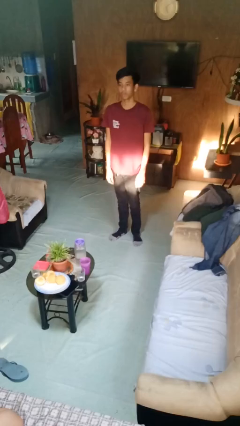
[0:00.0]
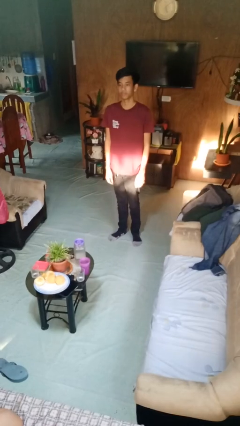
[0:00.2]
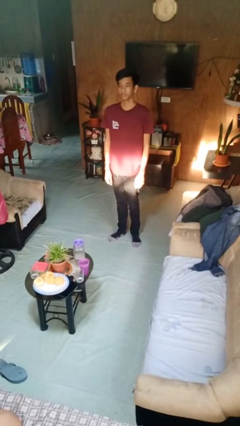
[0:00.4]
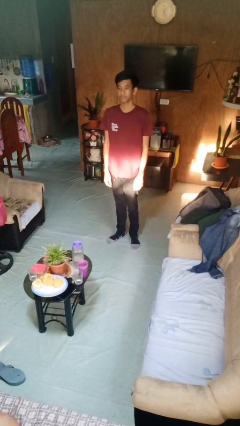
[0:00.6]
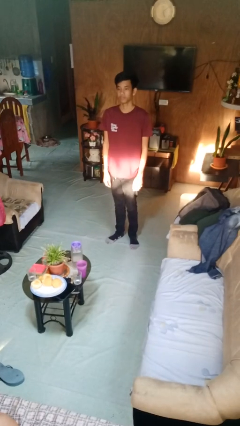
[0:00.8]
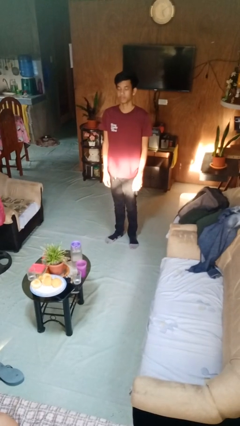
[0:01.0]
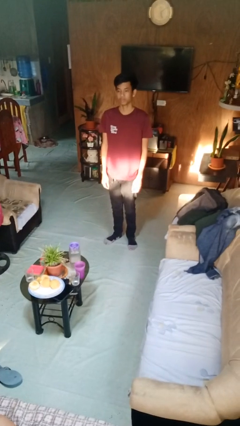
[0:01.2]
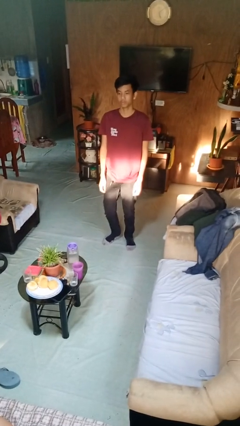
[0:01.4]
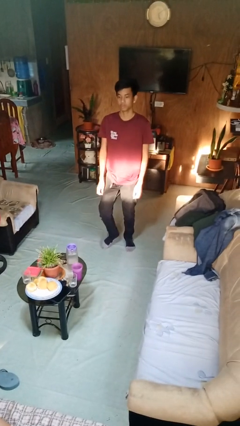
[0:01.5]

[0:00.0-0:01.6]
person stands up from floor

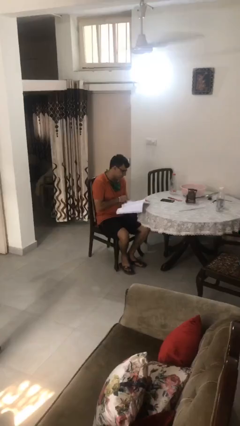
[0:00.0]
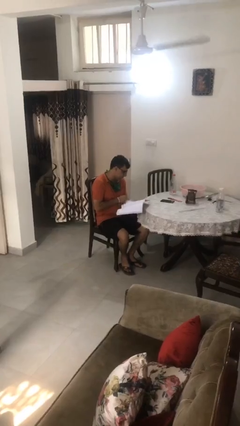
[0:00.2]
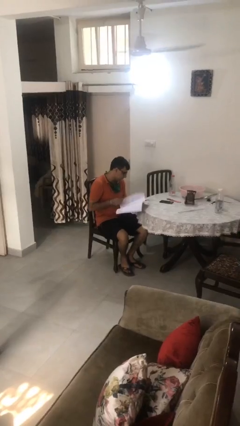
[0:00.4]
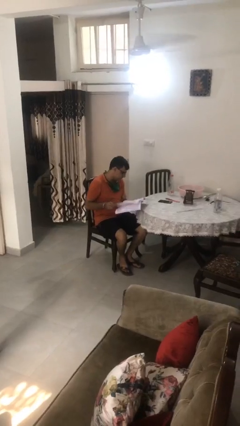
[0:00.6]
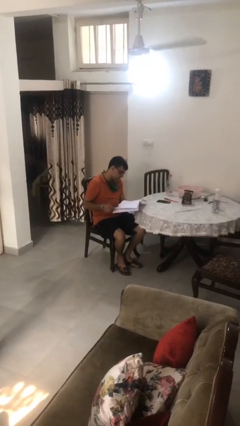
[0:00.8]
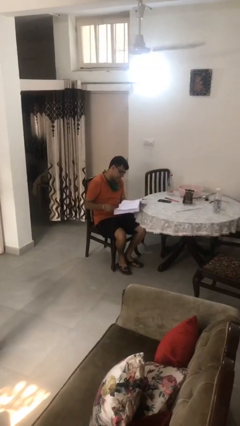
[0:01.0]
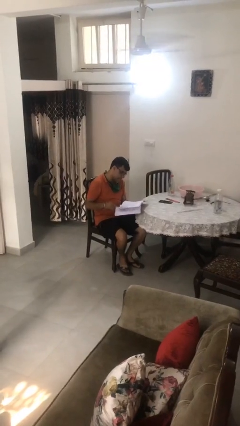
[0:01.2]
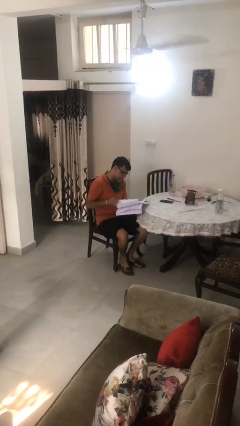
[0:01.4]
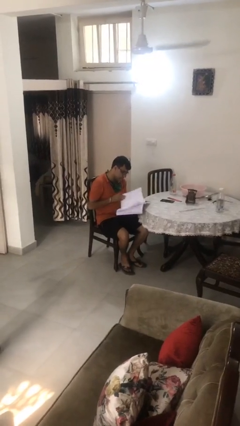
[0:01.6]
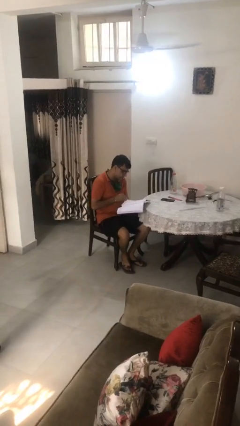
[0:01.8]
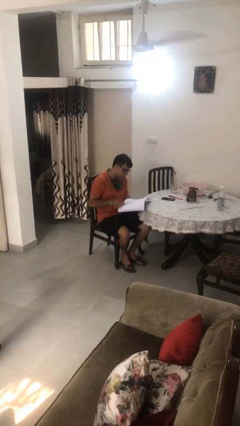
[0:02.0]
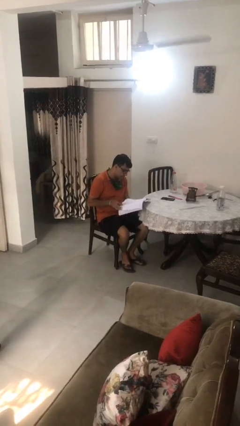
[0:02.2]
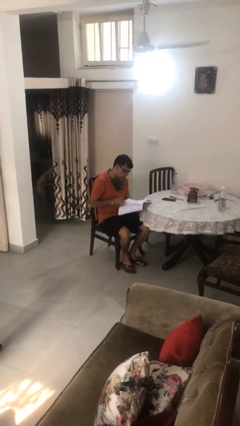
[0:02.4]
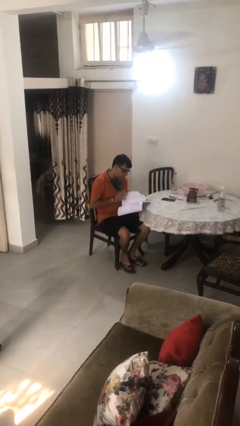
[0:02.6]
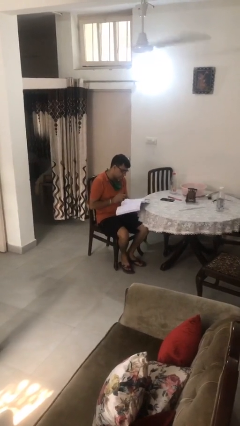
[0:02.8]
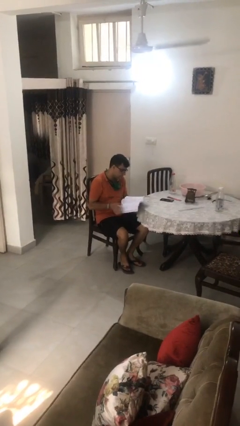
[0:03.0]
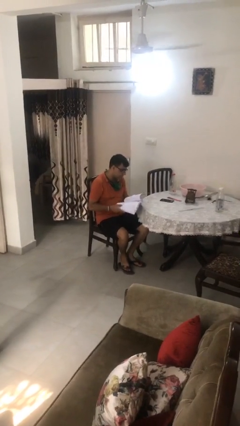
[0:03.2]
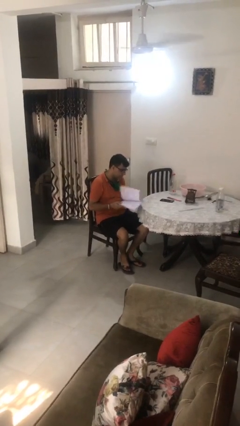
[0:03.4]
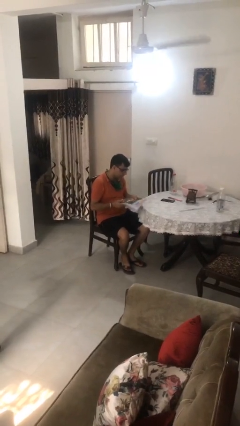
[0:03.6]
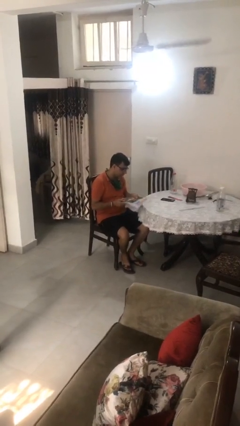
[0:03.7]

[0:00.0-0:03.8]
person reads document

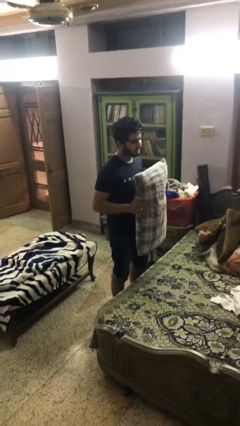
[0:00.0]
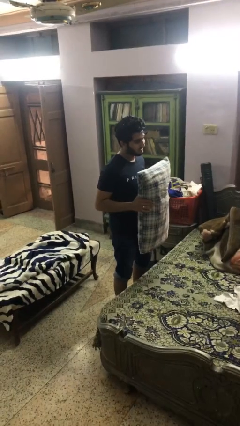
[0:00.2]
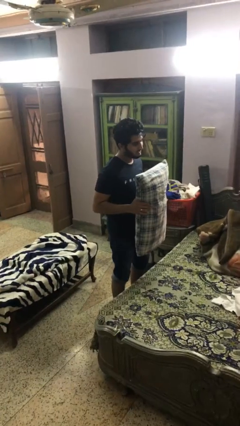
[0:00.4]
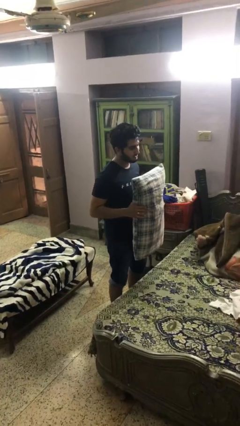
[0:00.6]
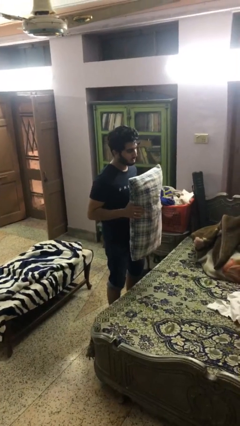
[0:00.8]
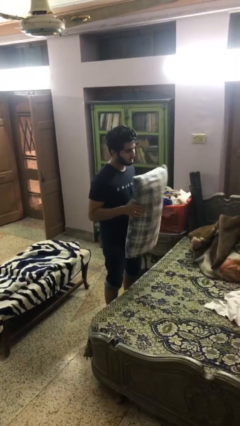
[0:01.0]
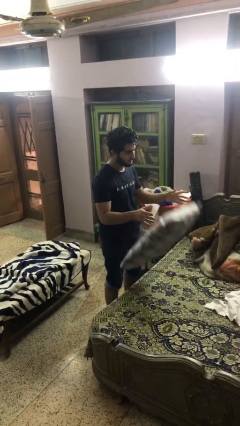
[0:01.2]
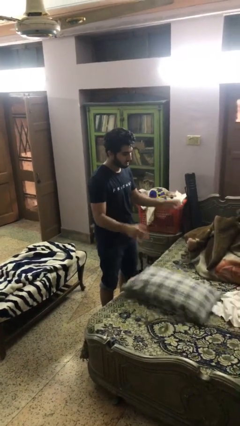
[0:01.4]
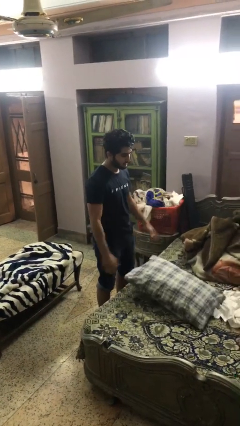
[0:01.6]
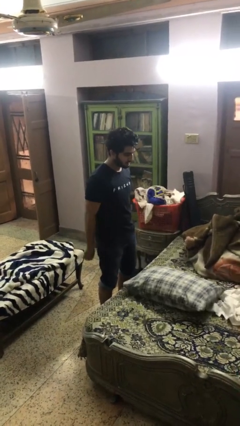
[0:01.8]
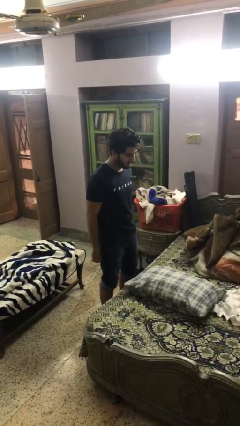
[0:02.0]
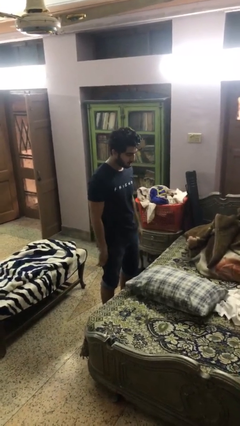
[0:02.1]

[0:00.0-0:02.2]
person puts down object on bed

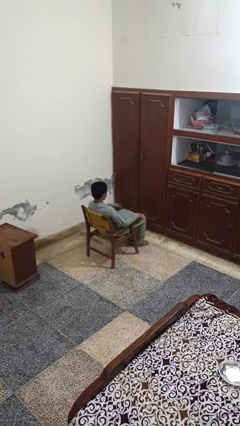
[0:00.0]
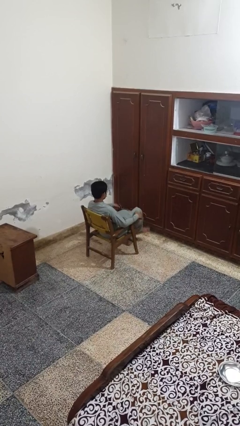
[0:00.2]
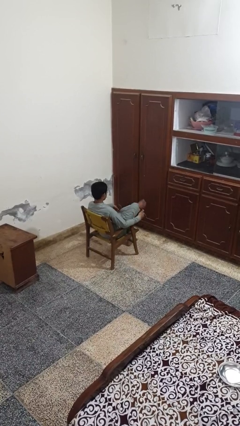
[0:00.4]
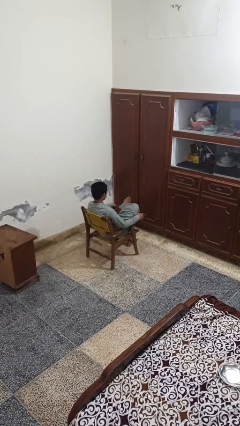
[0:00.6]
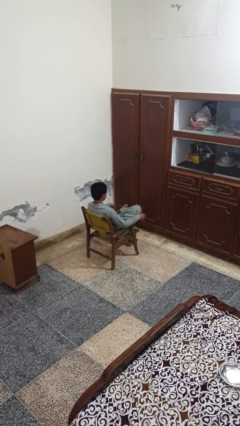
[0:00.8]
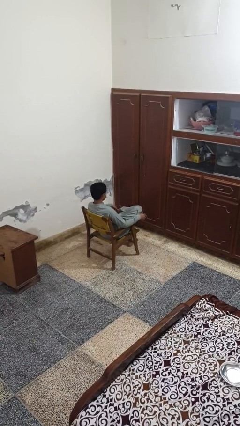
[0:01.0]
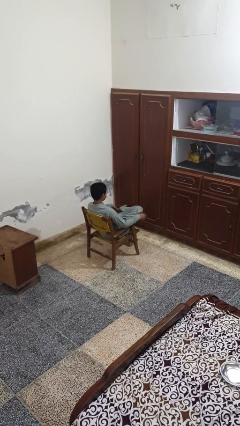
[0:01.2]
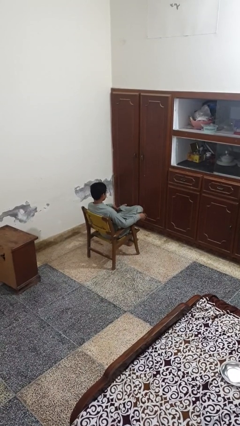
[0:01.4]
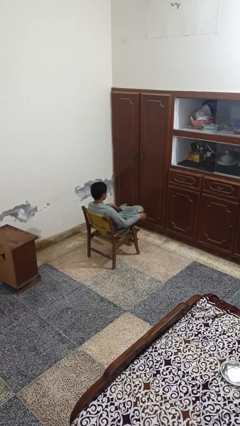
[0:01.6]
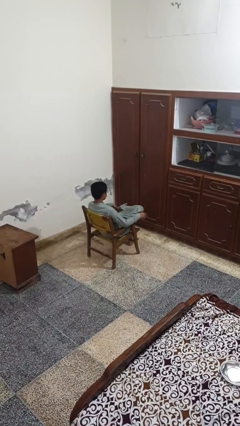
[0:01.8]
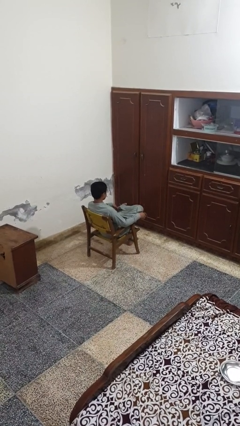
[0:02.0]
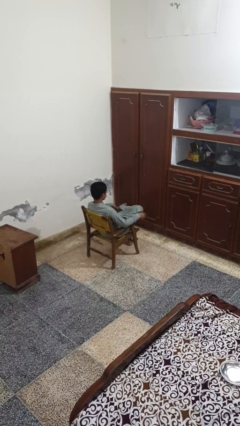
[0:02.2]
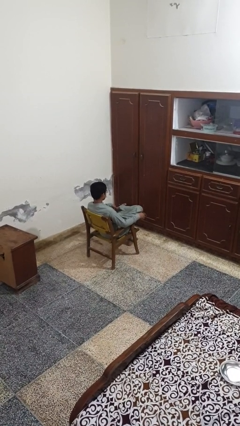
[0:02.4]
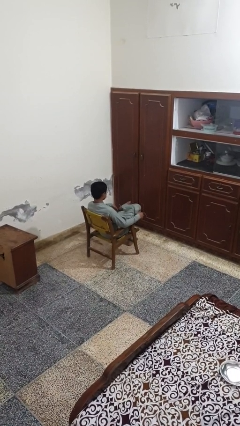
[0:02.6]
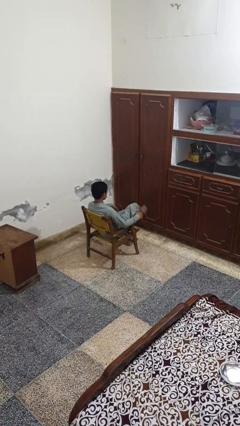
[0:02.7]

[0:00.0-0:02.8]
person crosses legs

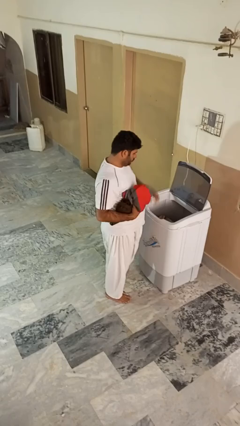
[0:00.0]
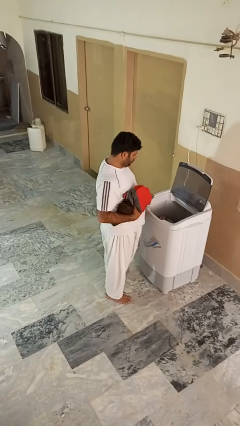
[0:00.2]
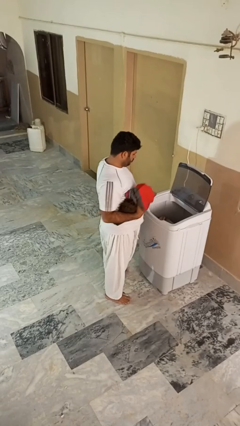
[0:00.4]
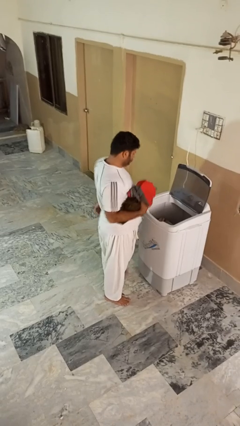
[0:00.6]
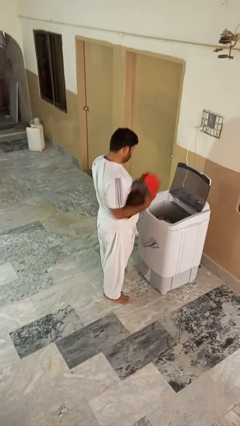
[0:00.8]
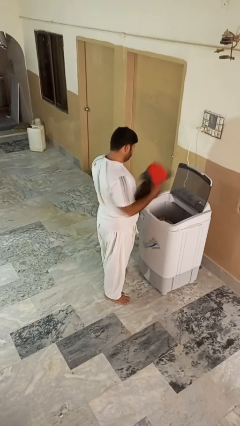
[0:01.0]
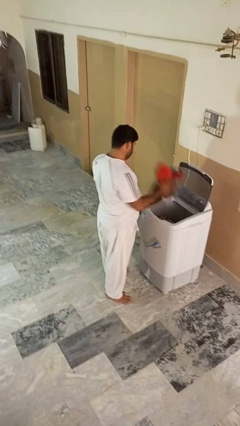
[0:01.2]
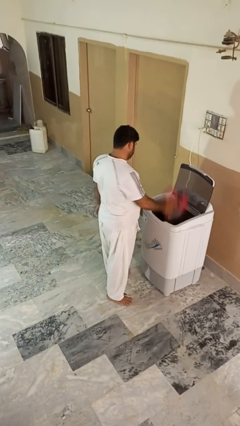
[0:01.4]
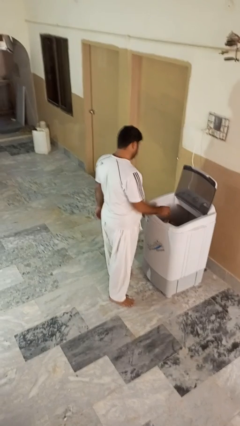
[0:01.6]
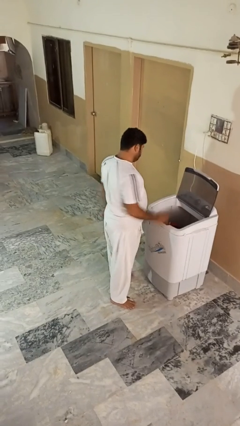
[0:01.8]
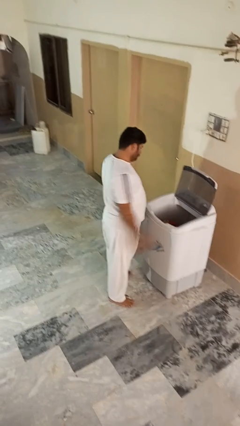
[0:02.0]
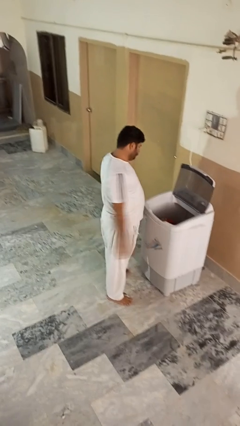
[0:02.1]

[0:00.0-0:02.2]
person loads clotheswasher

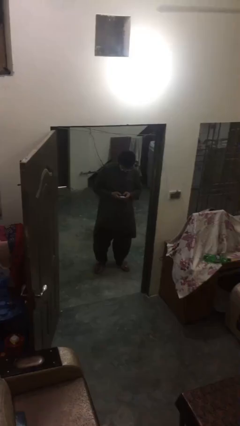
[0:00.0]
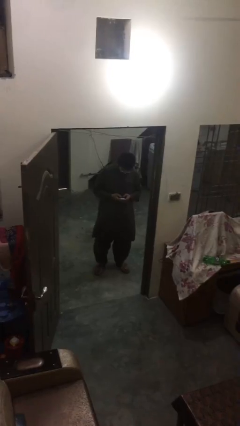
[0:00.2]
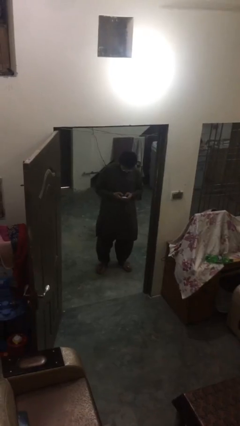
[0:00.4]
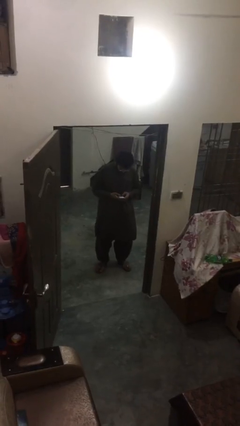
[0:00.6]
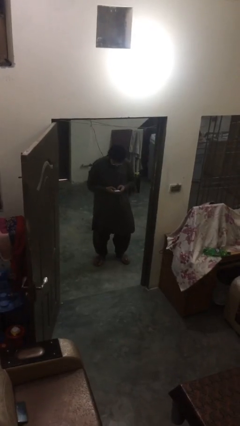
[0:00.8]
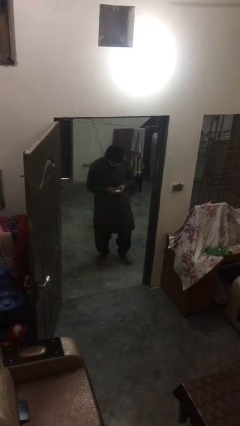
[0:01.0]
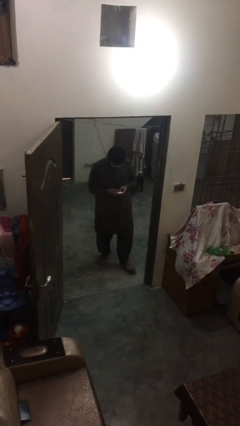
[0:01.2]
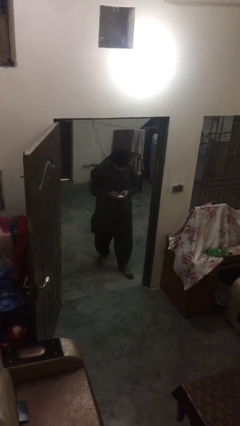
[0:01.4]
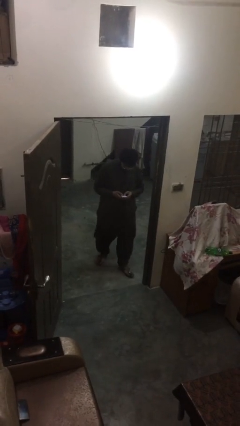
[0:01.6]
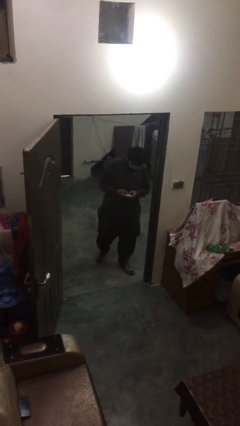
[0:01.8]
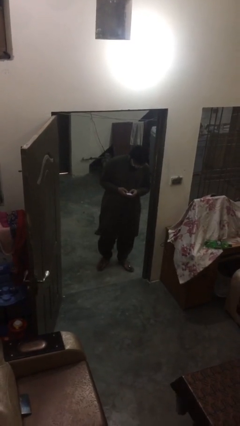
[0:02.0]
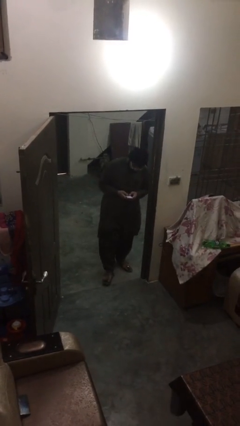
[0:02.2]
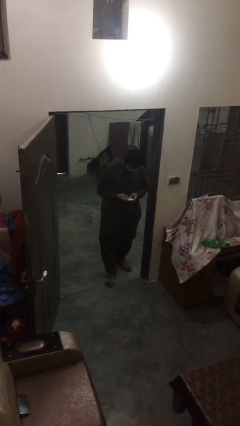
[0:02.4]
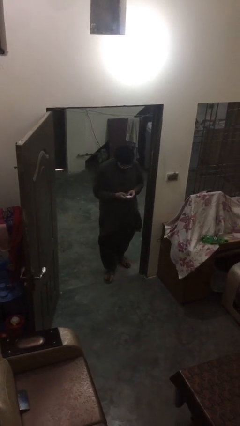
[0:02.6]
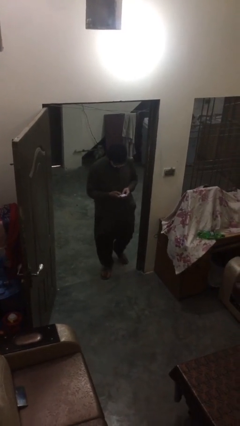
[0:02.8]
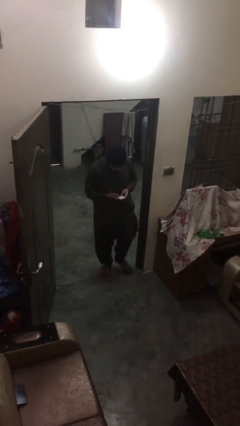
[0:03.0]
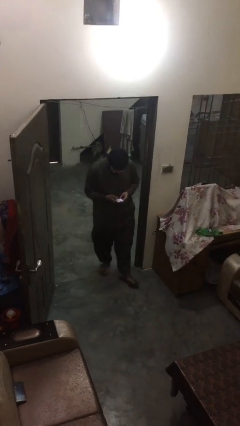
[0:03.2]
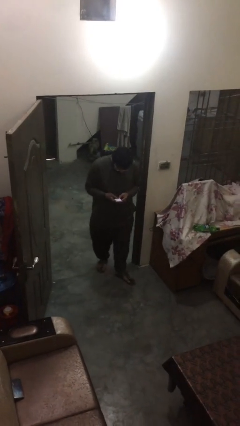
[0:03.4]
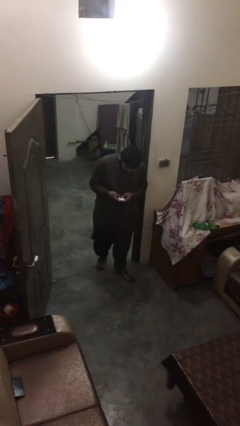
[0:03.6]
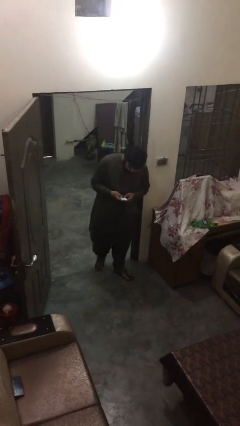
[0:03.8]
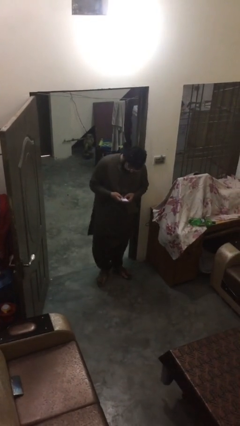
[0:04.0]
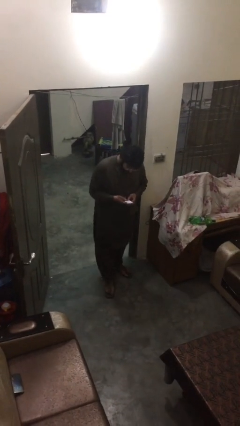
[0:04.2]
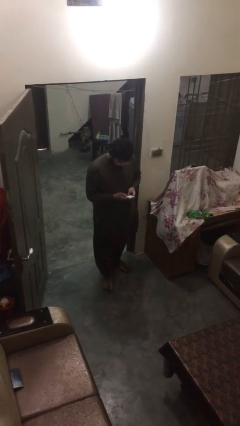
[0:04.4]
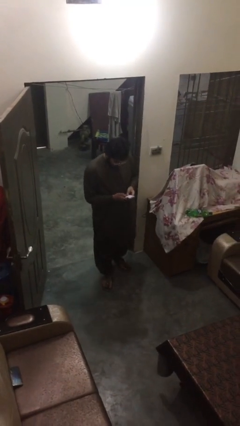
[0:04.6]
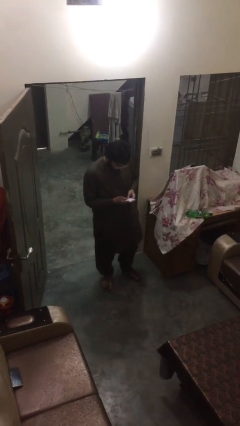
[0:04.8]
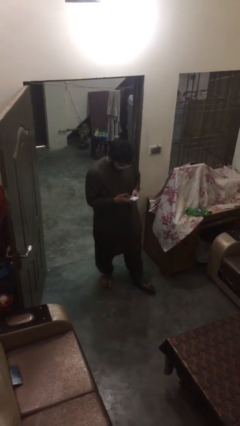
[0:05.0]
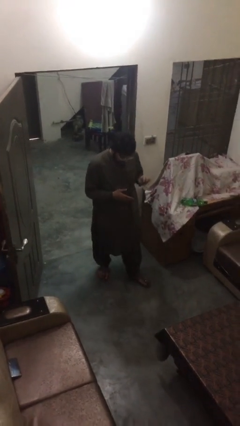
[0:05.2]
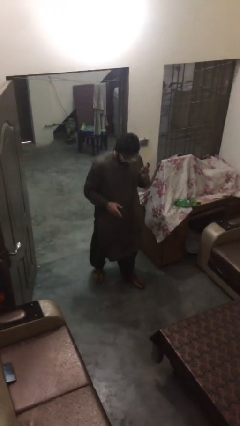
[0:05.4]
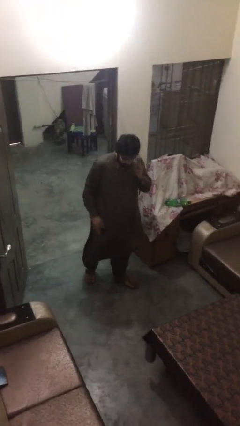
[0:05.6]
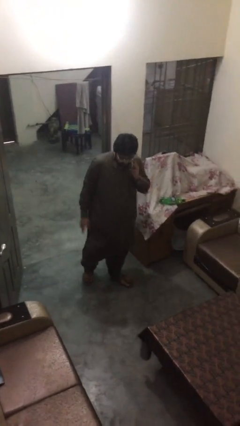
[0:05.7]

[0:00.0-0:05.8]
person texts on phone
